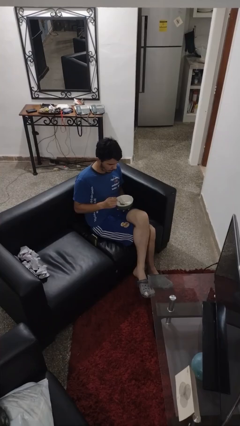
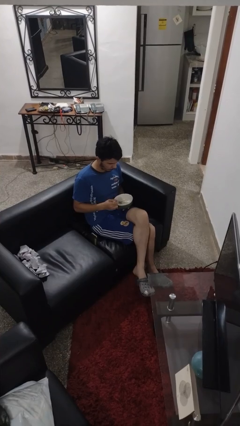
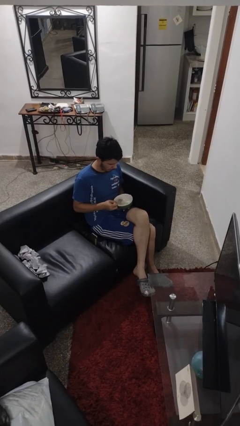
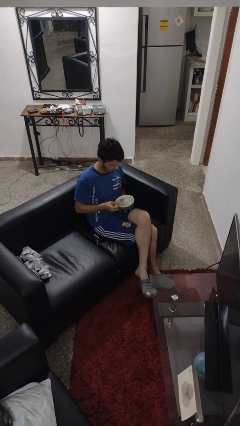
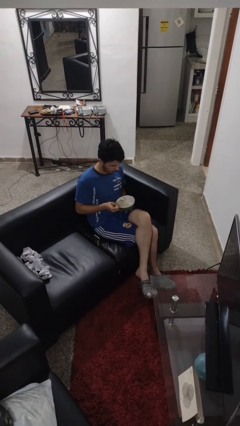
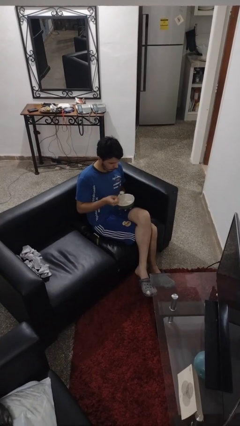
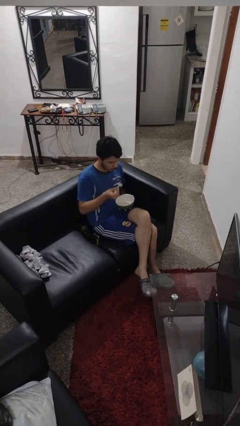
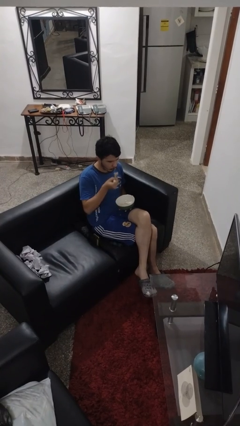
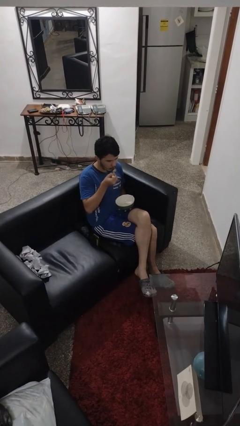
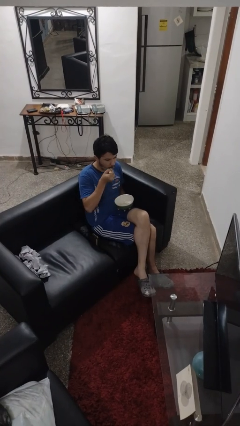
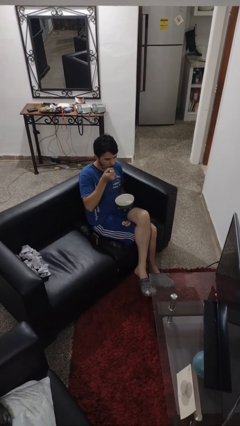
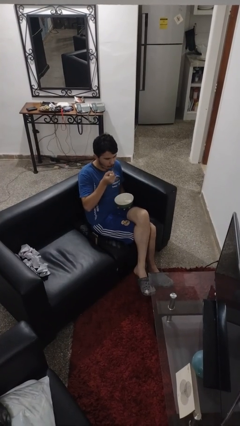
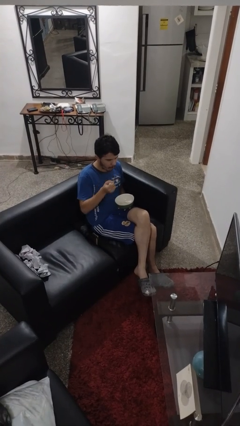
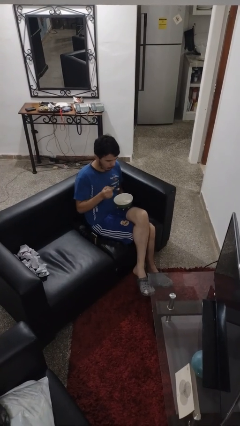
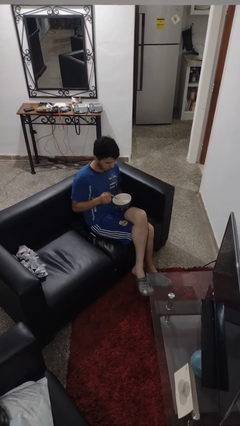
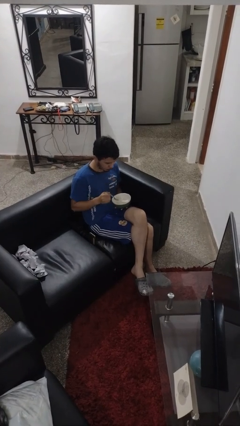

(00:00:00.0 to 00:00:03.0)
person eats with utensil

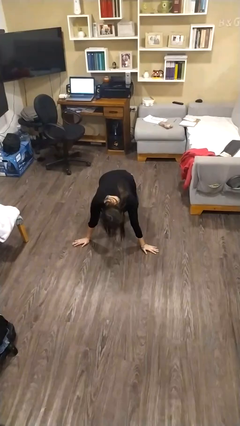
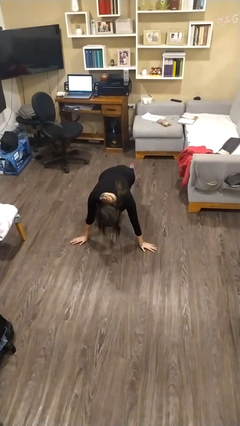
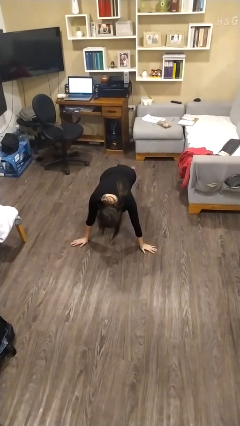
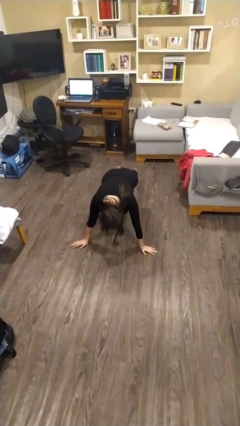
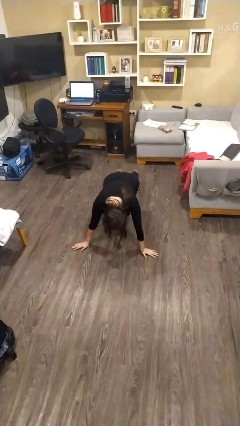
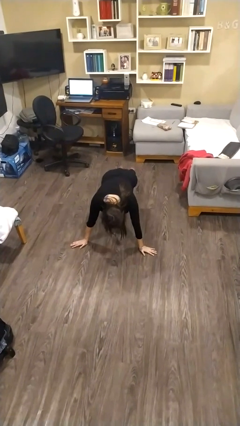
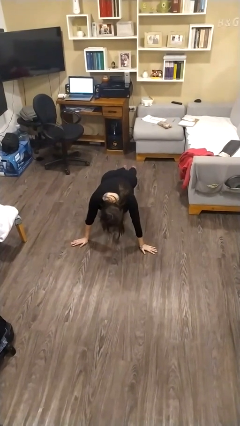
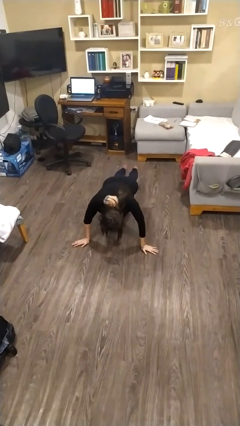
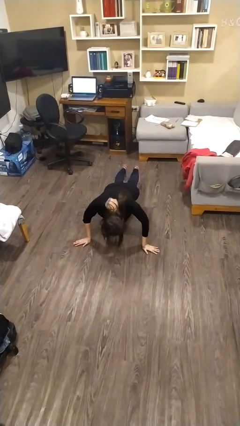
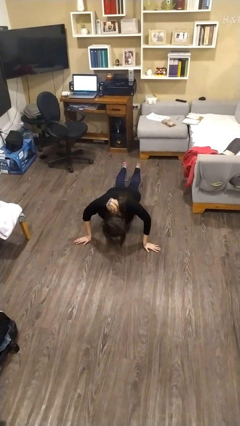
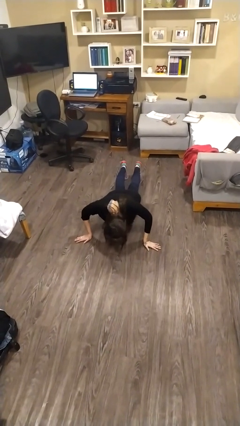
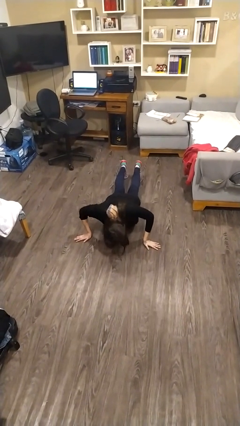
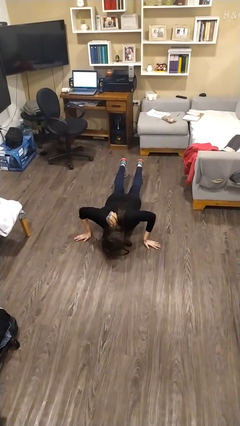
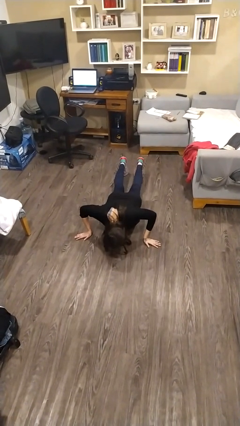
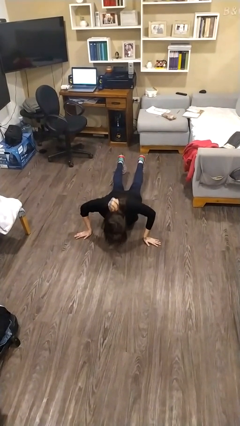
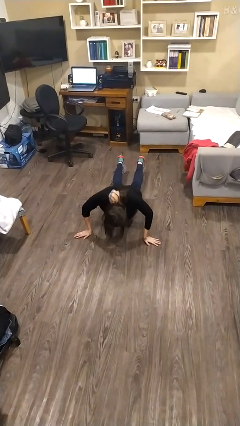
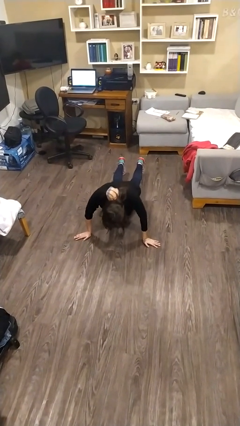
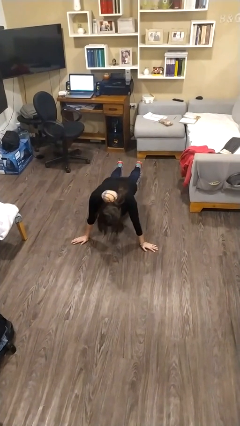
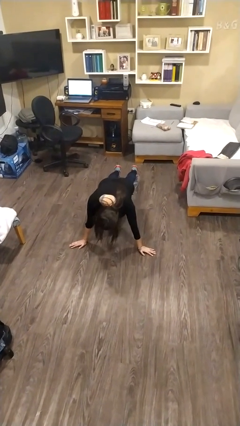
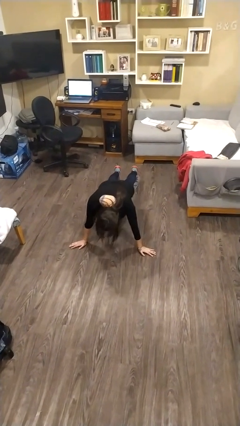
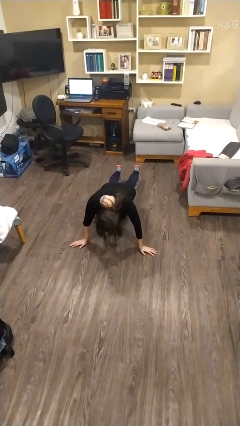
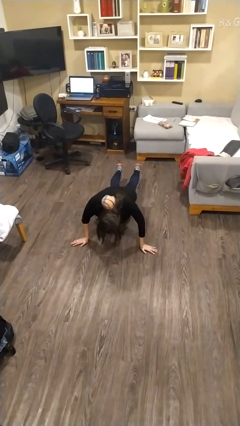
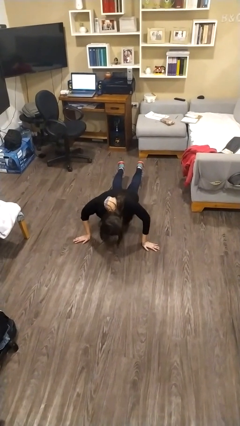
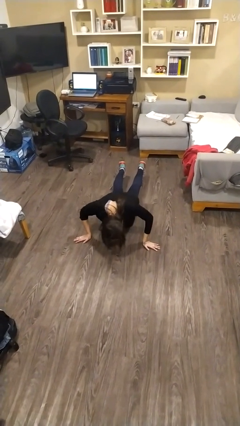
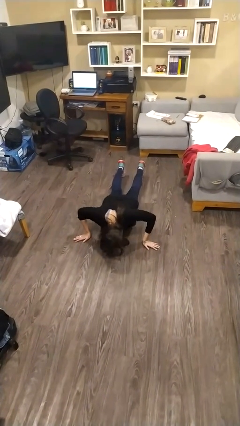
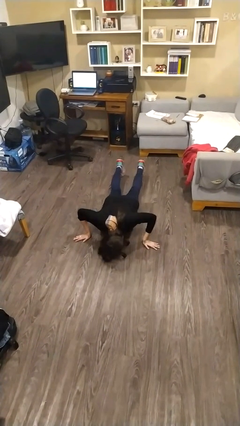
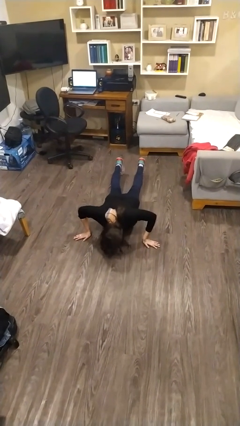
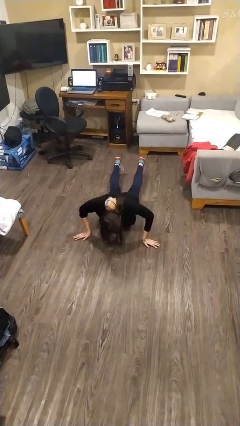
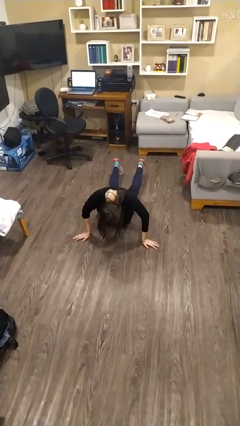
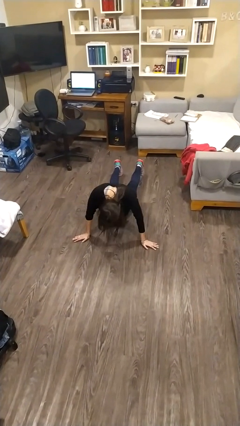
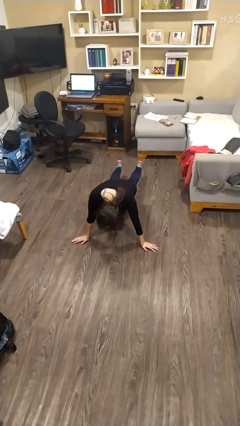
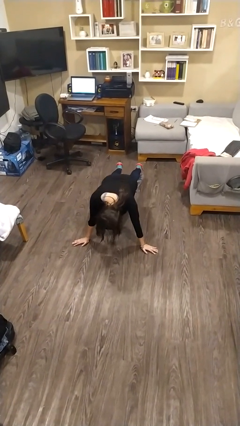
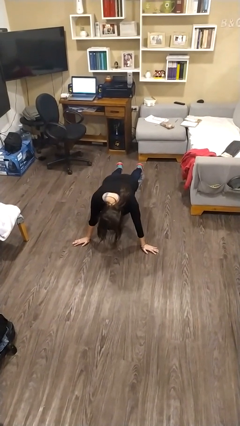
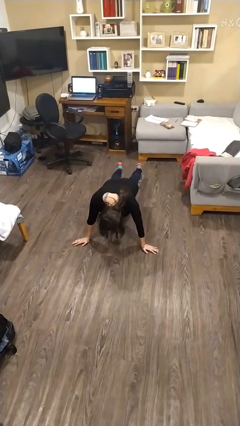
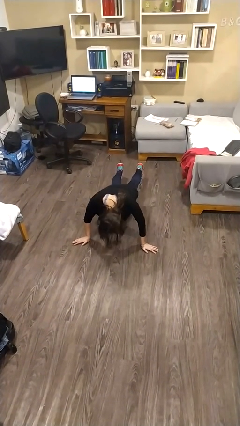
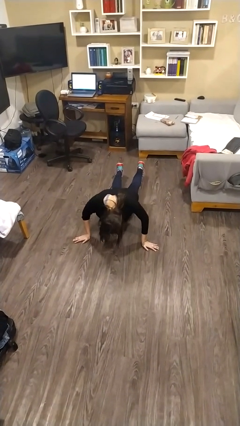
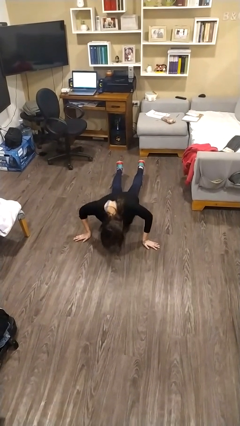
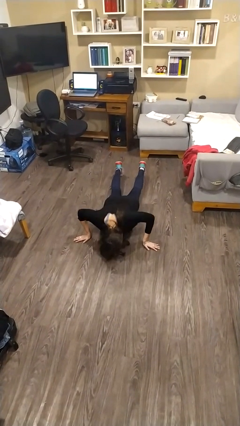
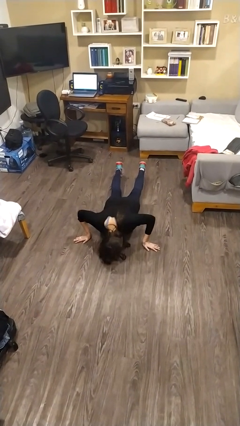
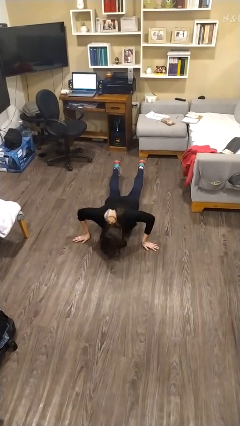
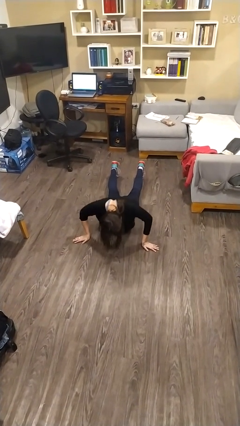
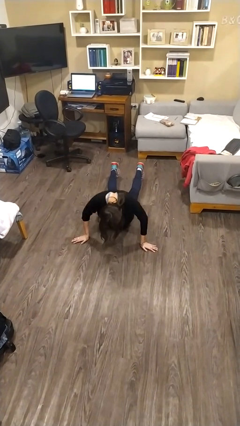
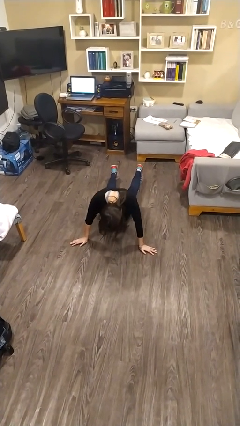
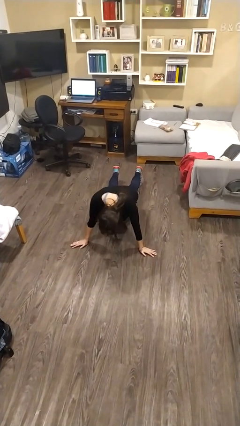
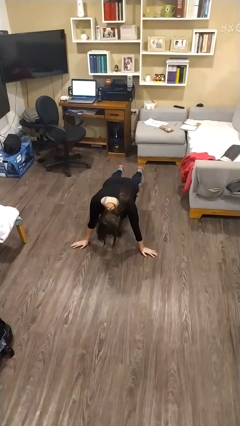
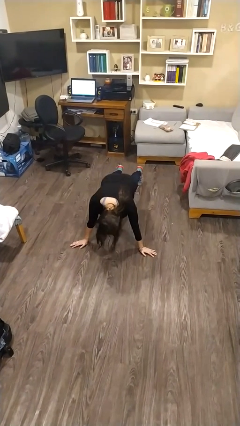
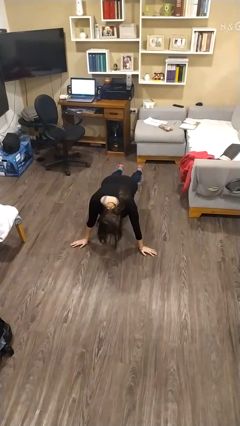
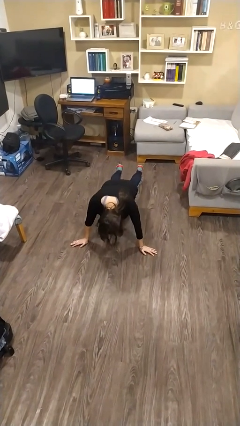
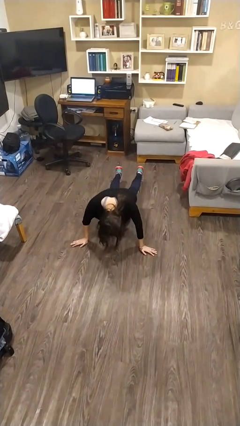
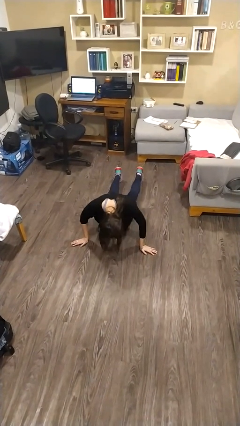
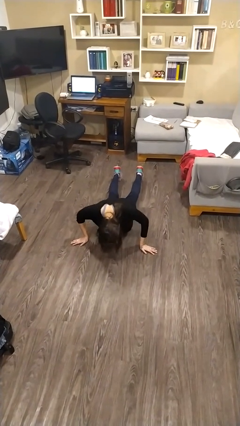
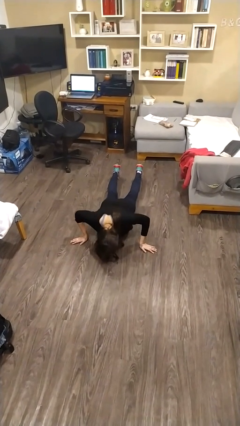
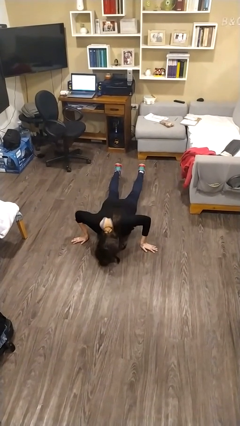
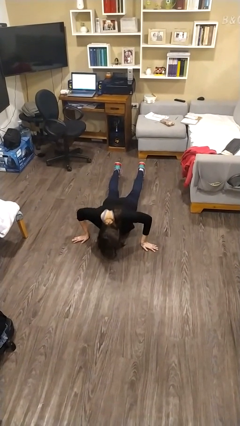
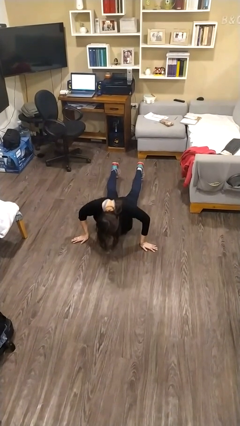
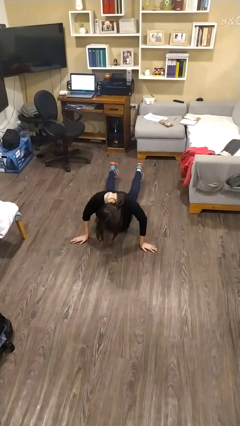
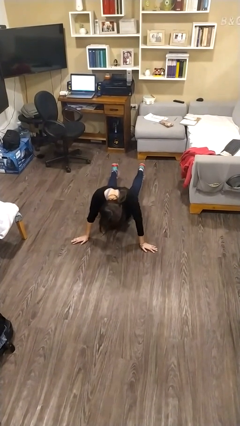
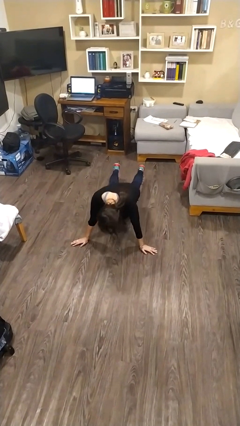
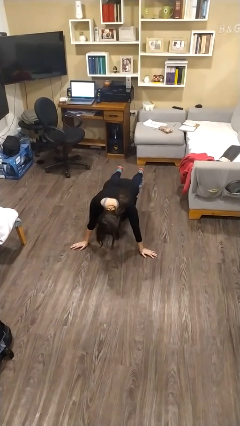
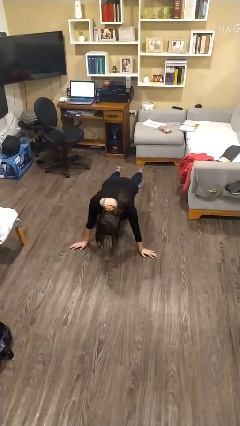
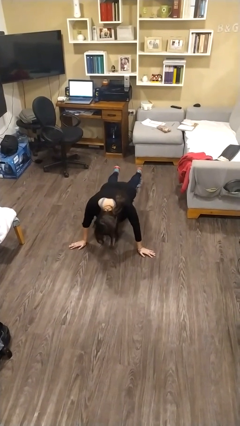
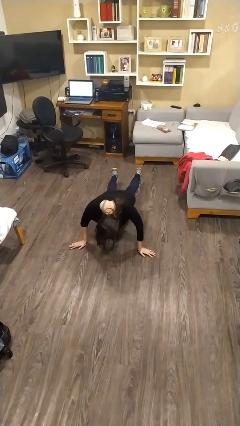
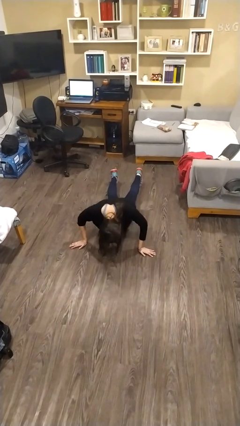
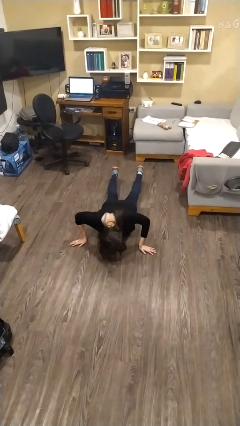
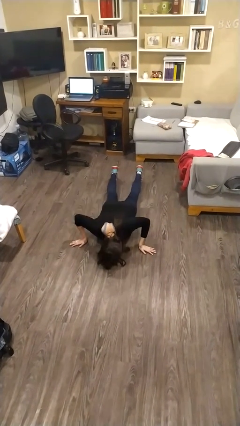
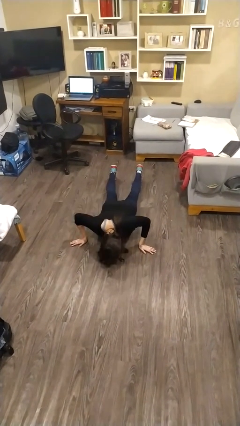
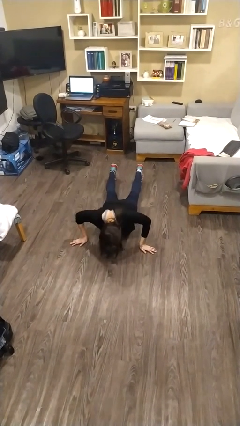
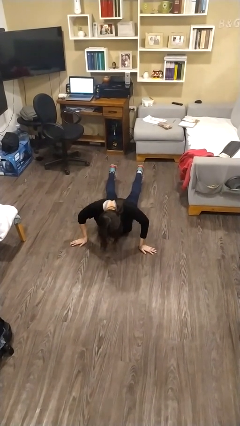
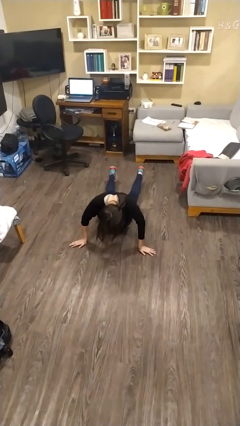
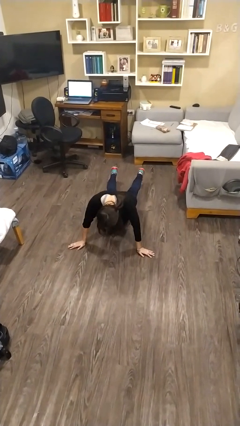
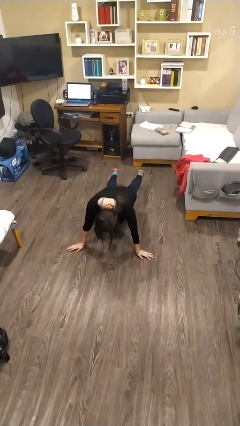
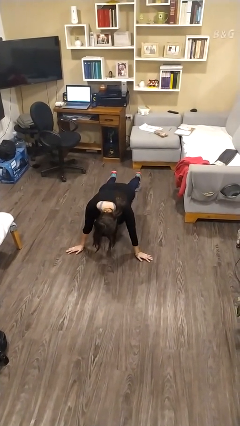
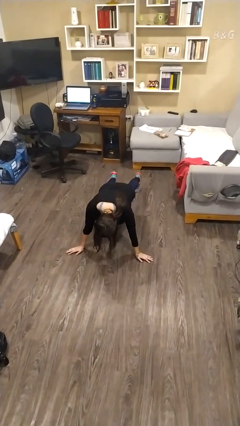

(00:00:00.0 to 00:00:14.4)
person exercises with pushup

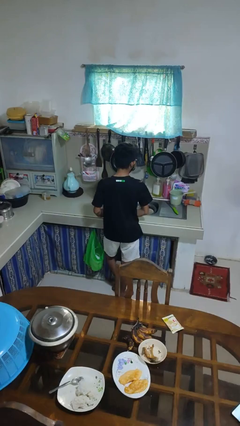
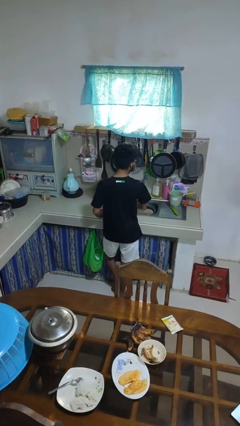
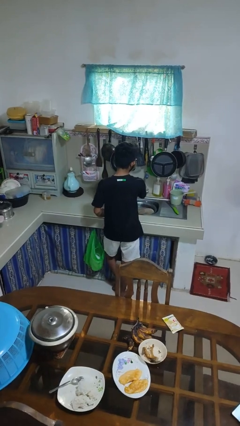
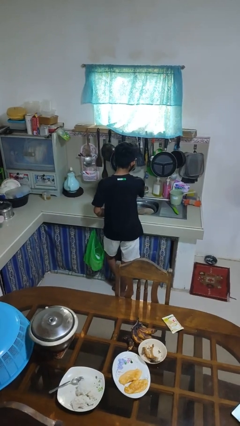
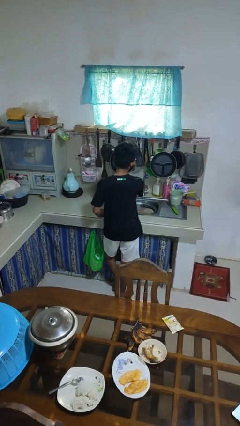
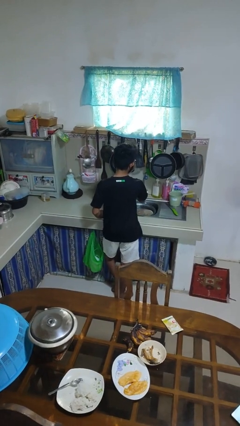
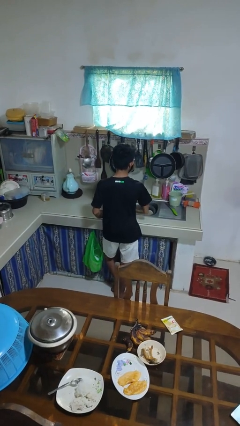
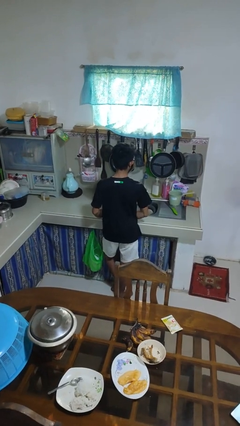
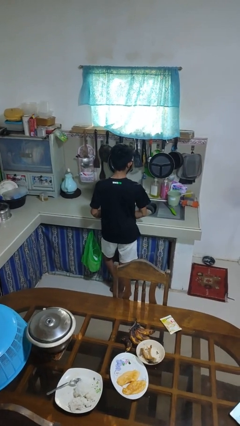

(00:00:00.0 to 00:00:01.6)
person closes clothes washer
